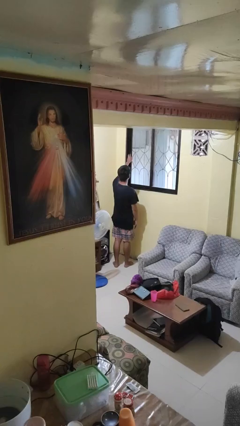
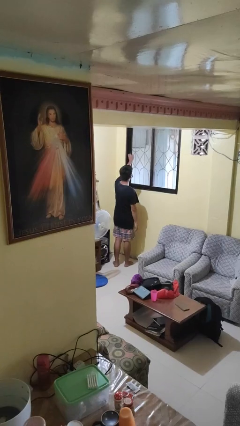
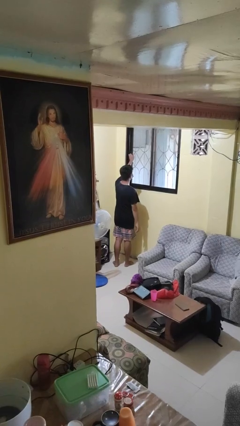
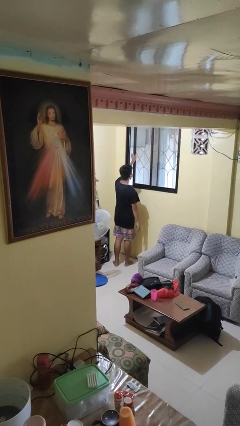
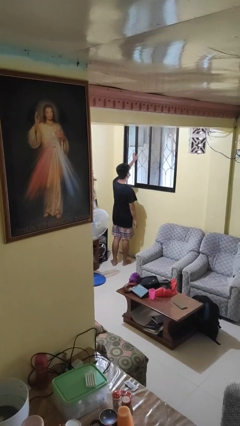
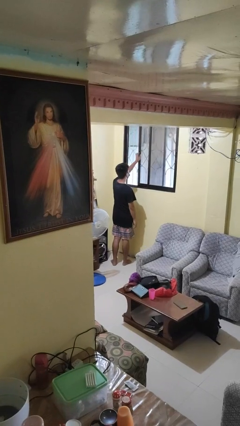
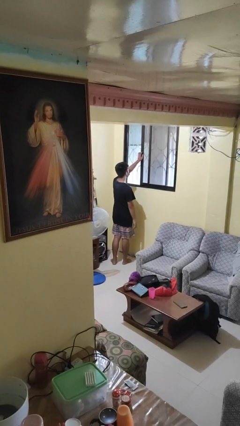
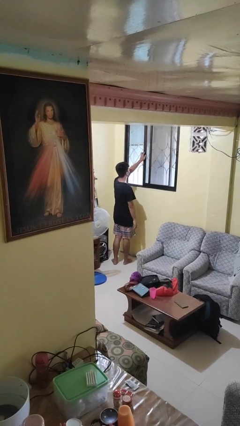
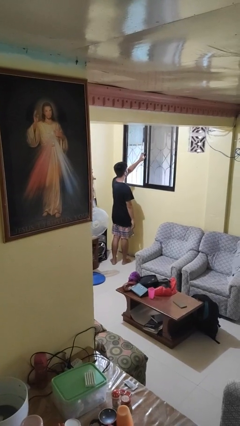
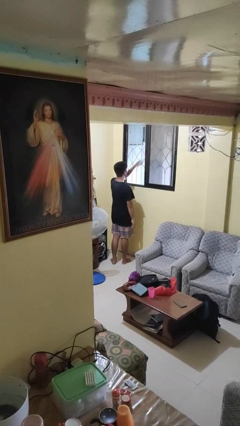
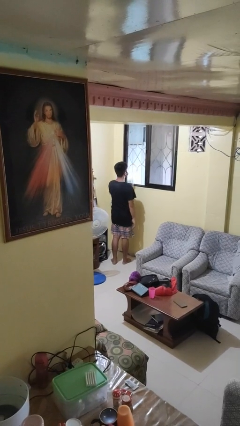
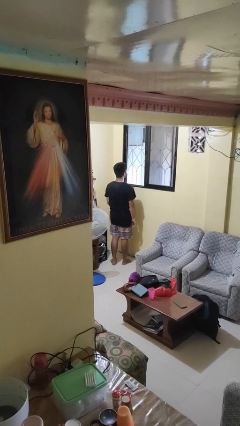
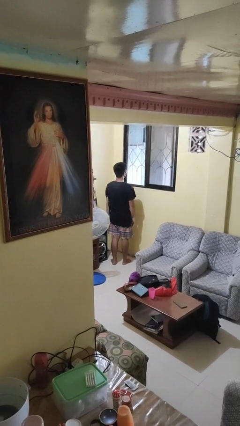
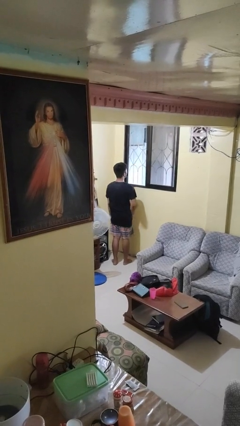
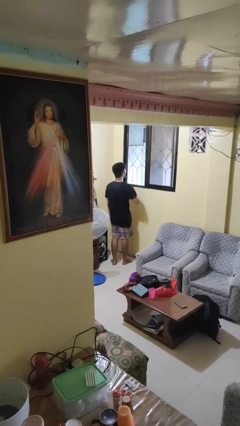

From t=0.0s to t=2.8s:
person opens home window

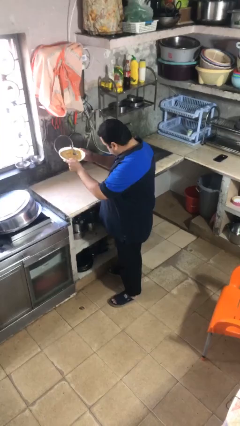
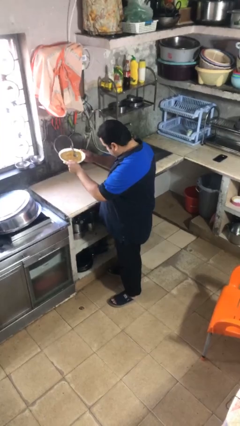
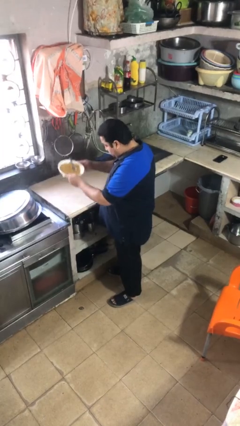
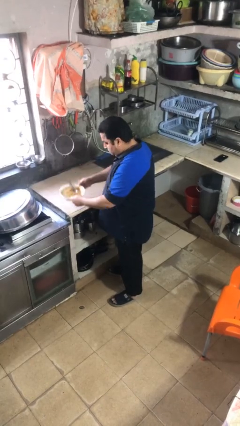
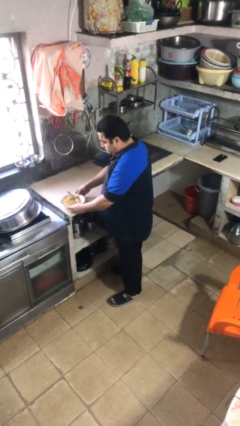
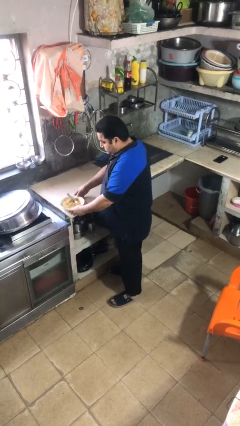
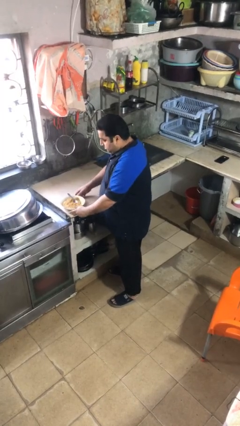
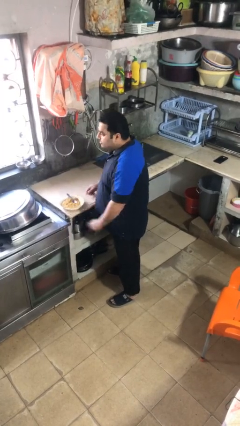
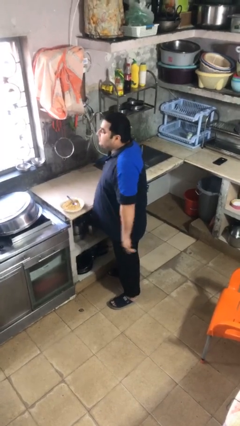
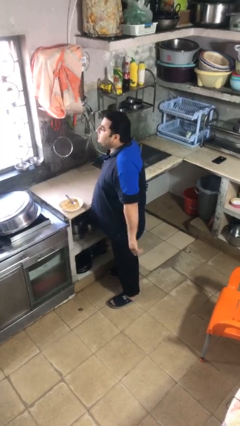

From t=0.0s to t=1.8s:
person puts down object on countertop

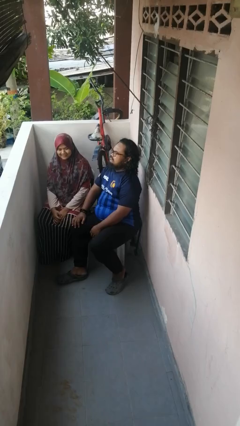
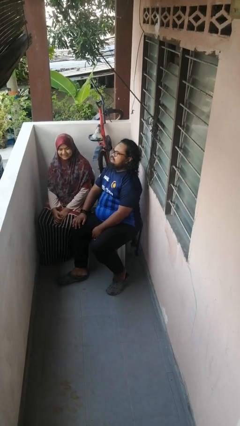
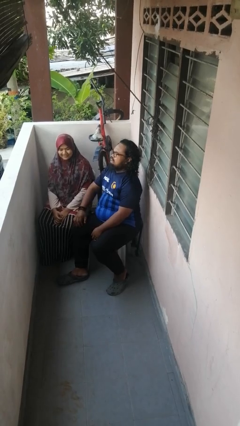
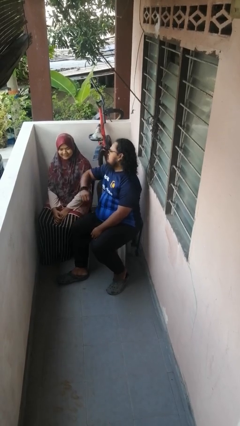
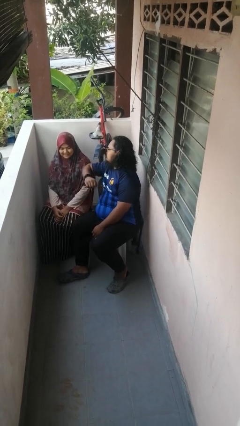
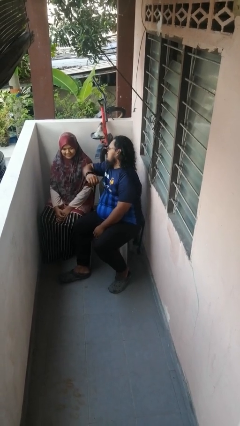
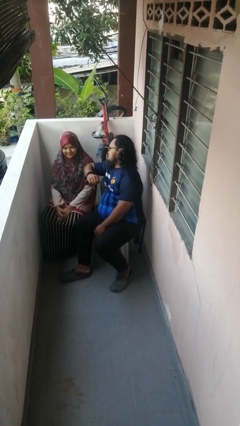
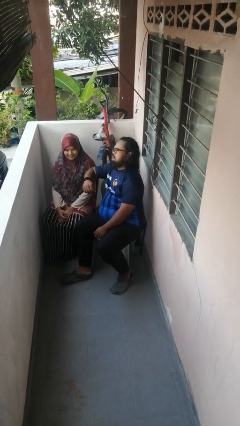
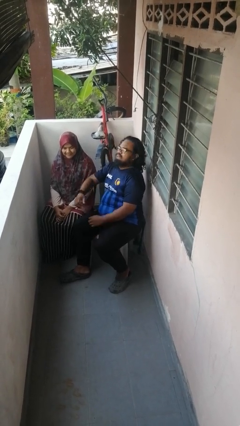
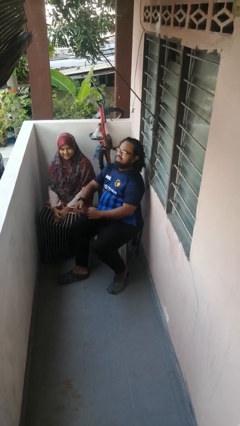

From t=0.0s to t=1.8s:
person nudges person with elbow

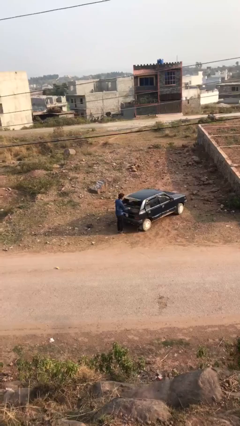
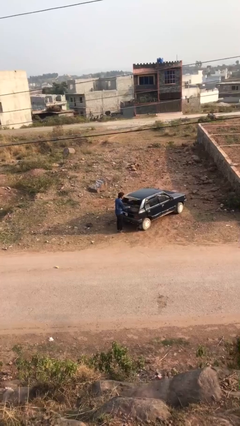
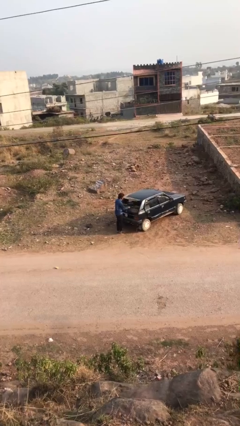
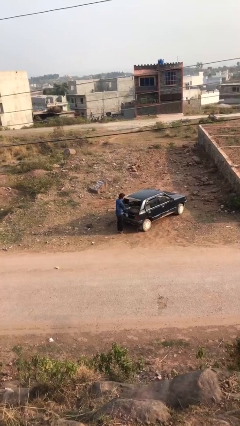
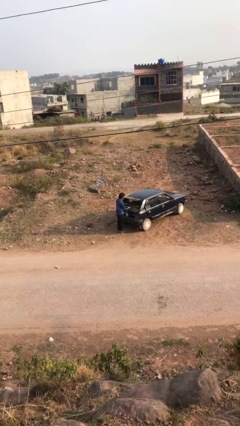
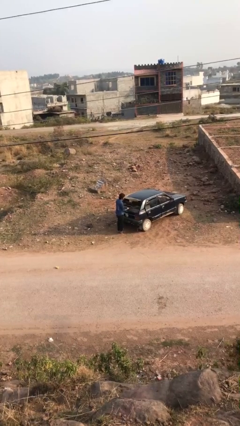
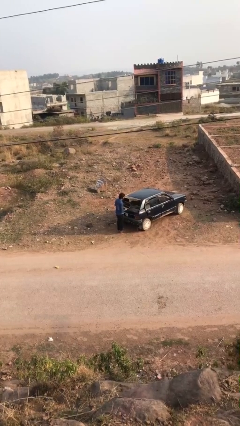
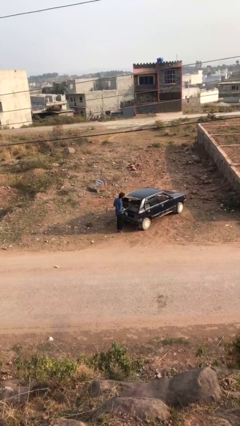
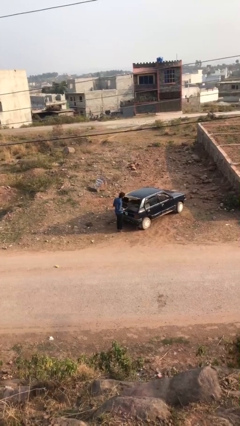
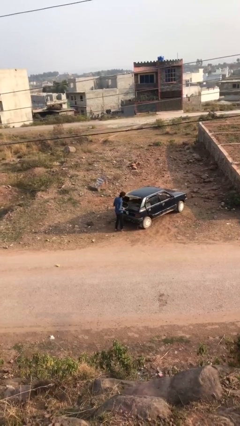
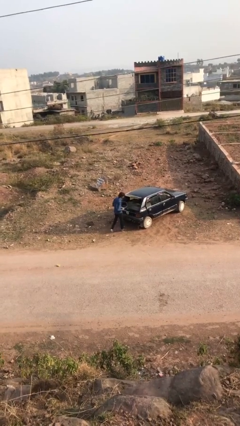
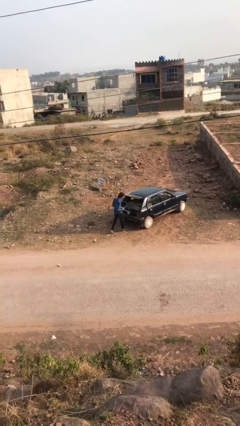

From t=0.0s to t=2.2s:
person unloads car

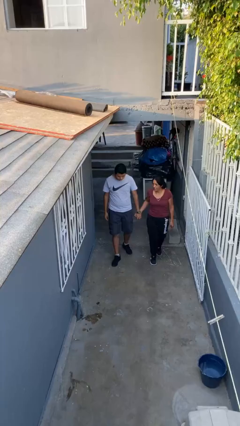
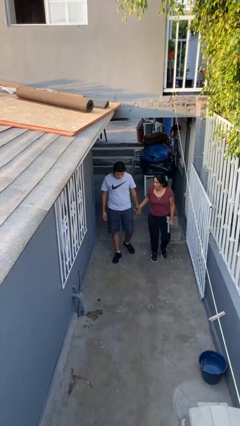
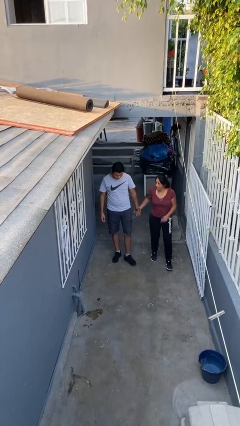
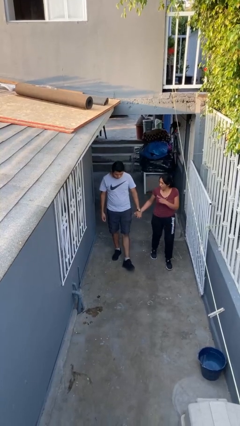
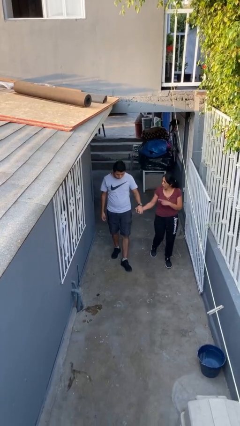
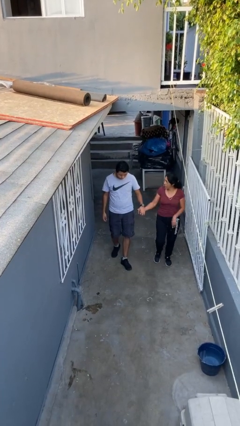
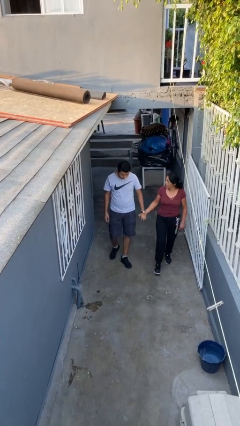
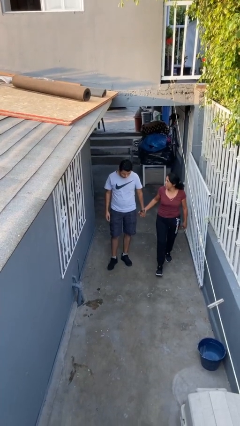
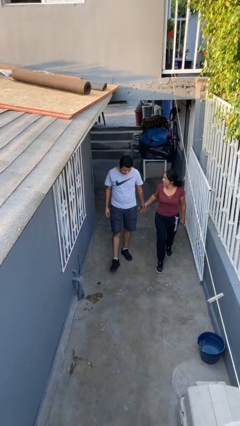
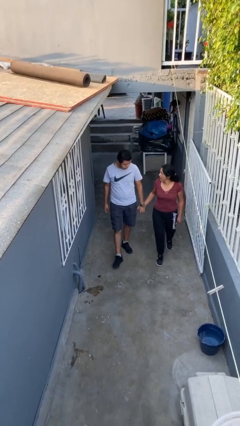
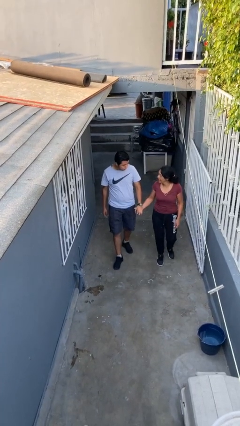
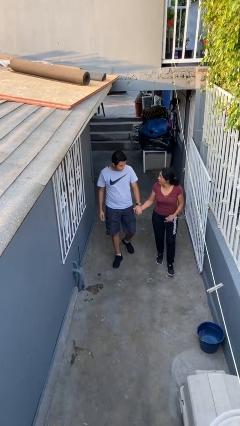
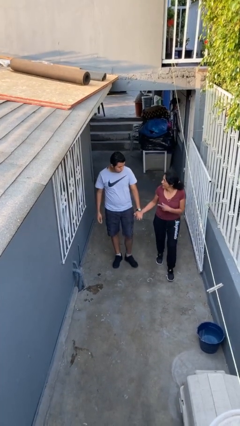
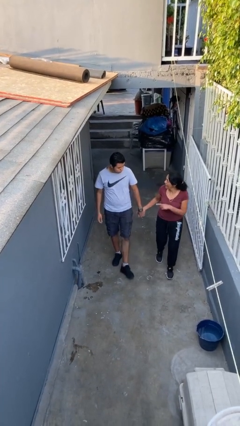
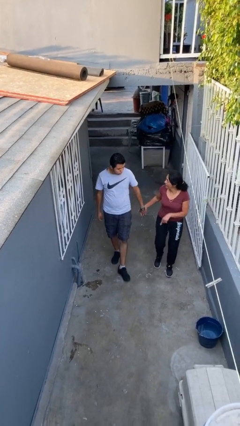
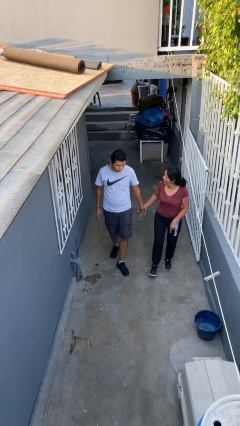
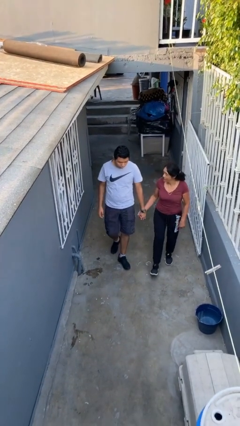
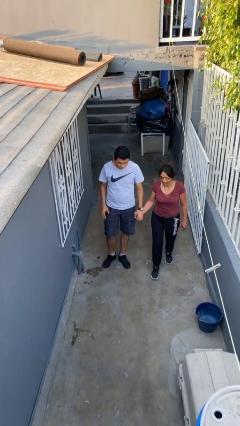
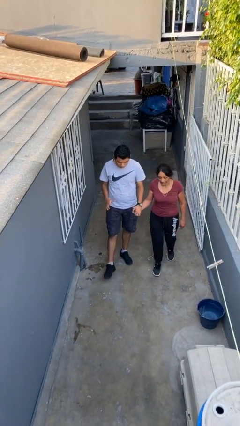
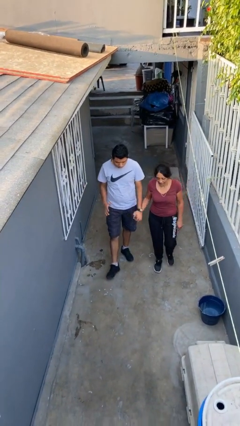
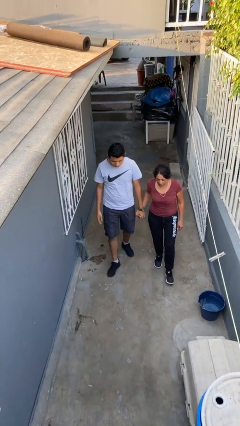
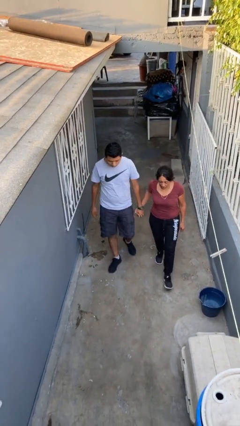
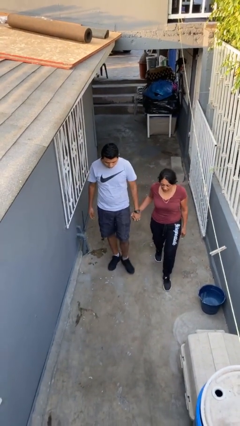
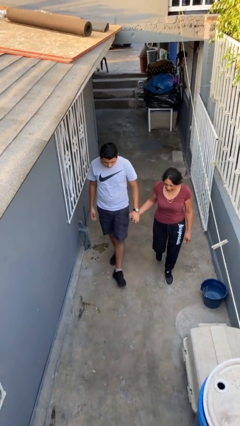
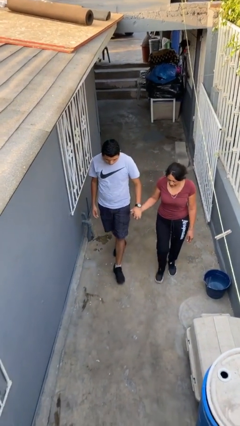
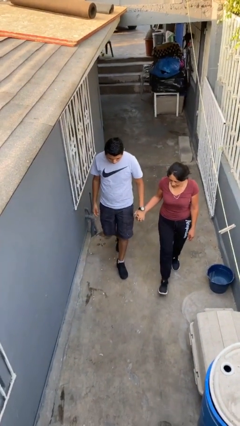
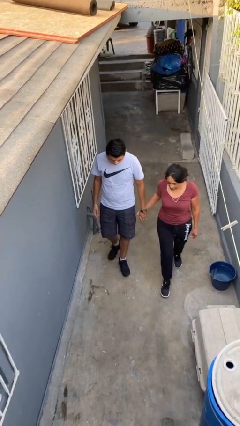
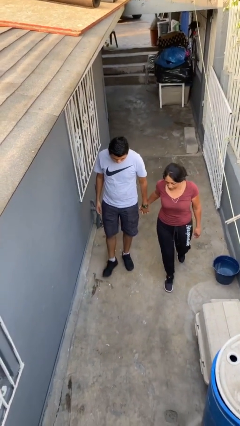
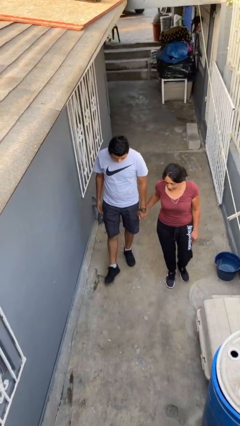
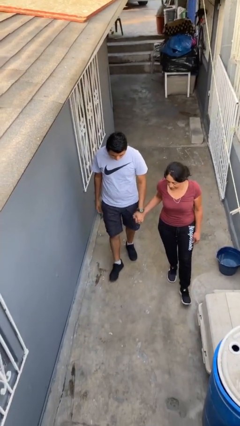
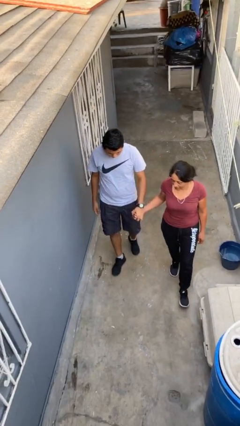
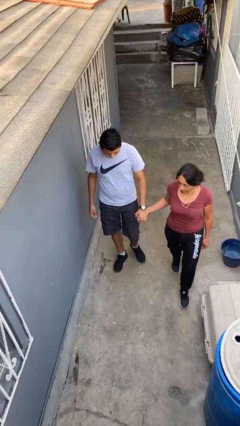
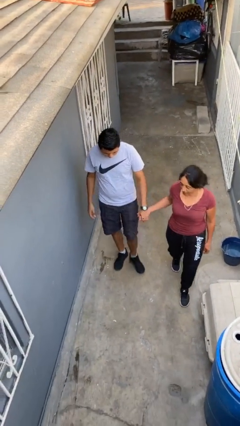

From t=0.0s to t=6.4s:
person holds hand

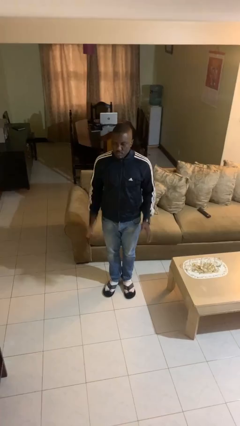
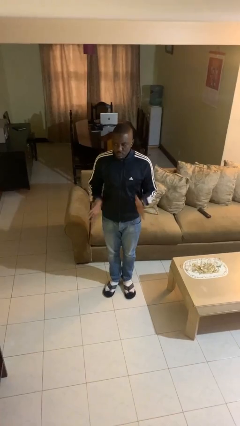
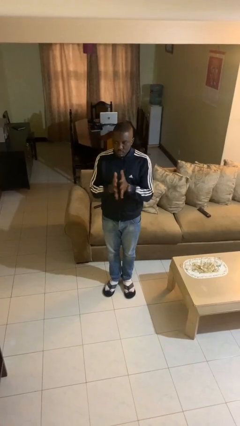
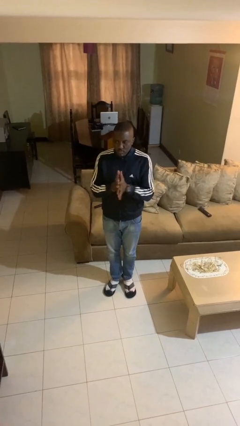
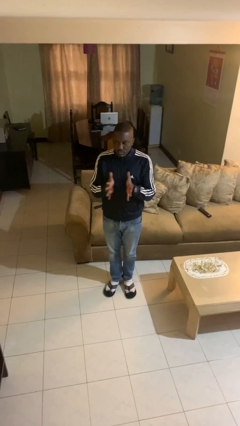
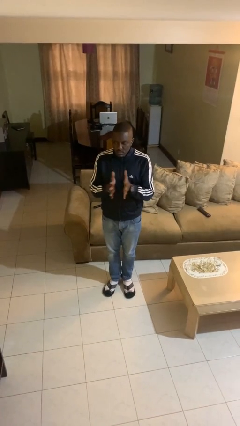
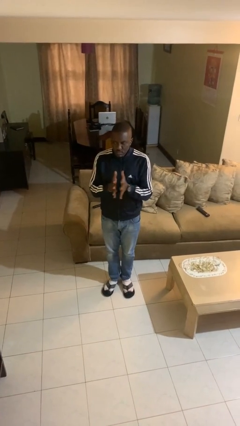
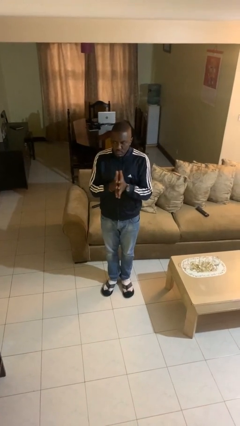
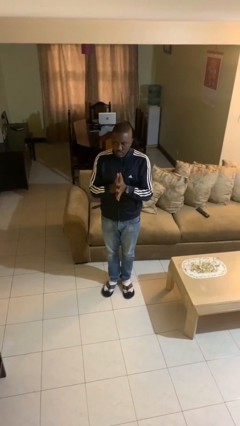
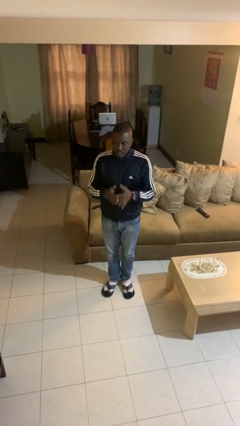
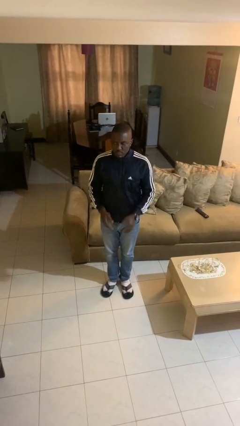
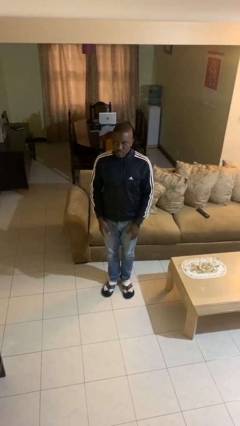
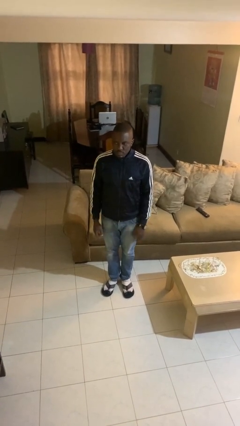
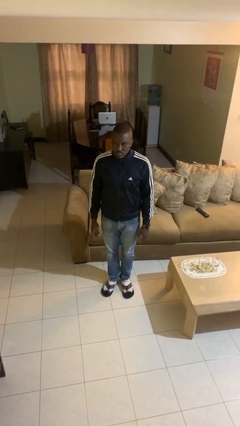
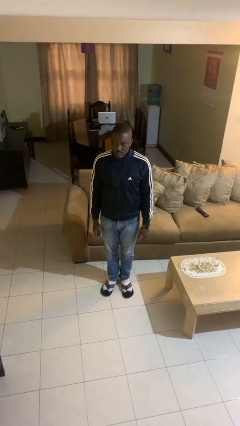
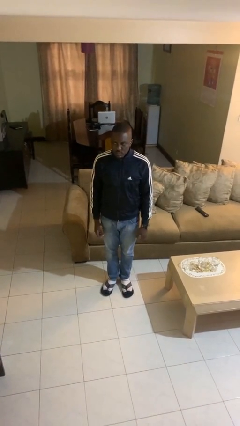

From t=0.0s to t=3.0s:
person claps hands
